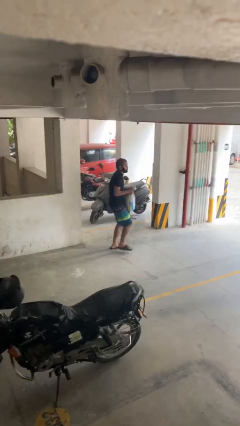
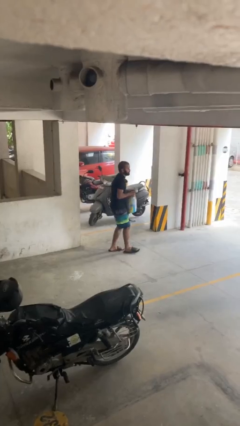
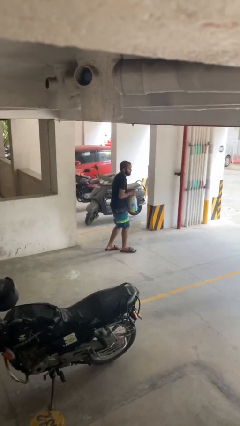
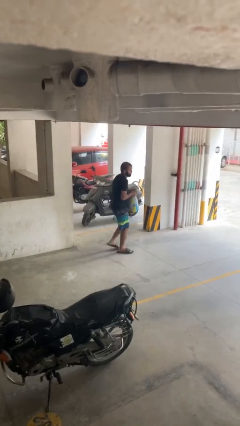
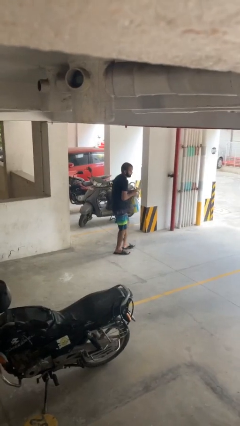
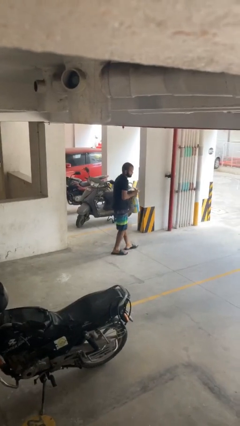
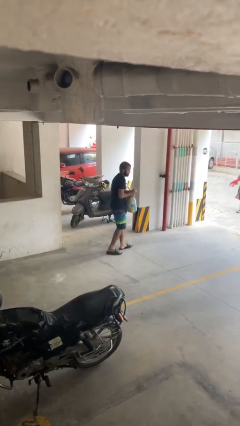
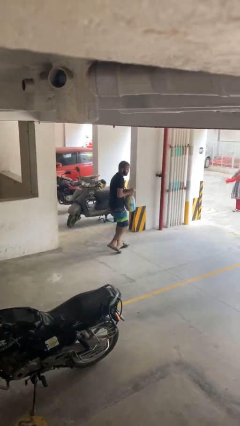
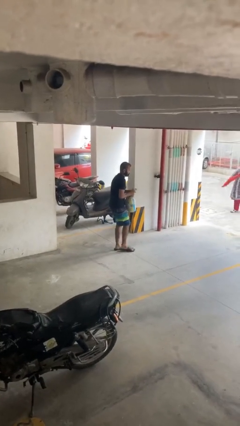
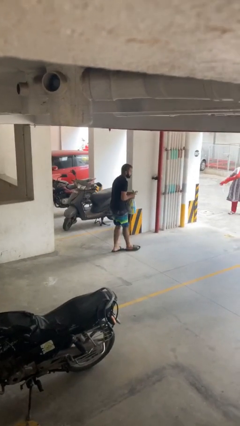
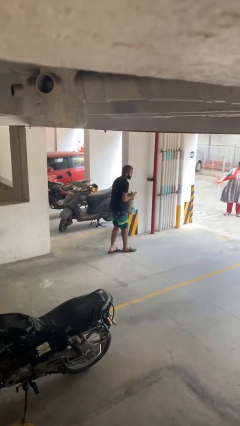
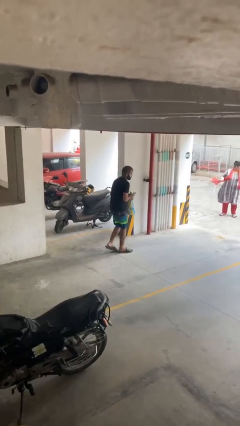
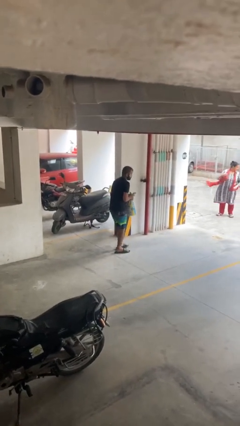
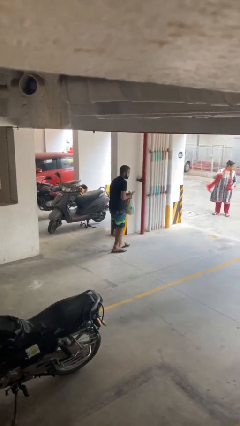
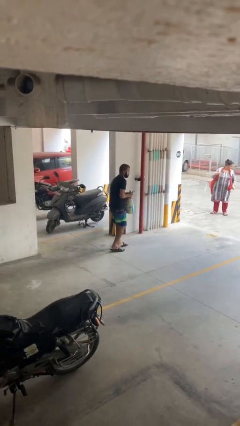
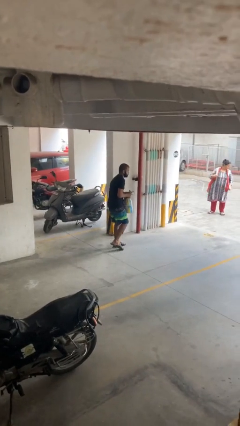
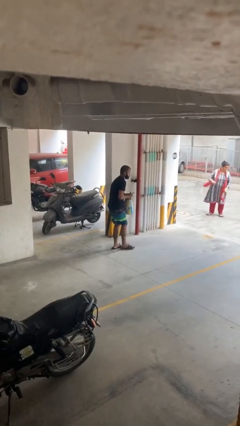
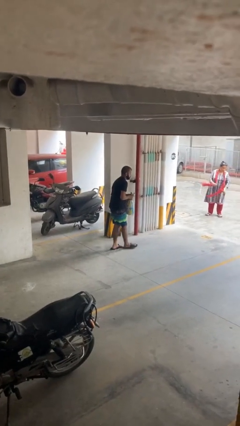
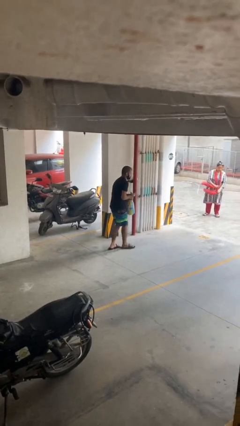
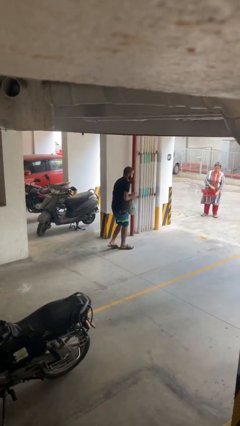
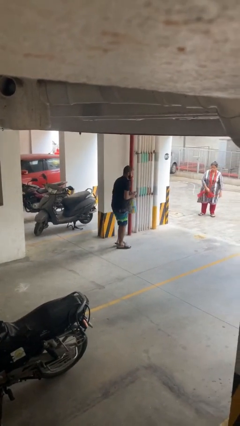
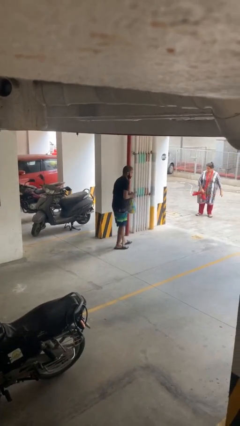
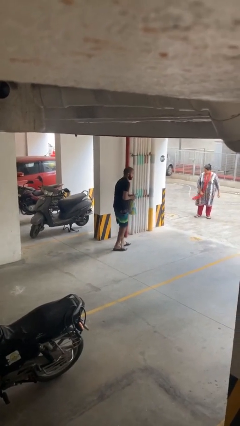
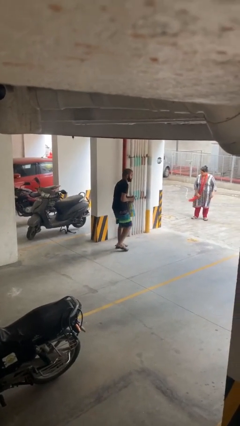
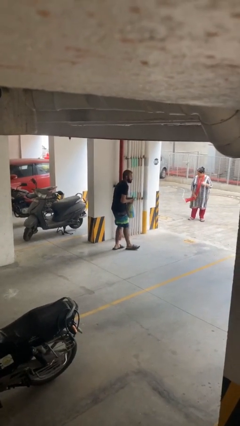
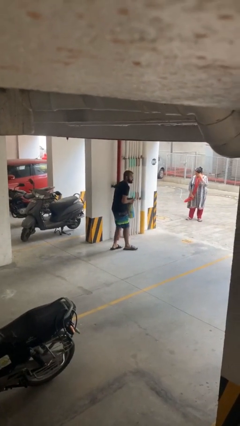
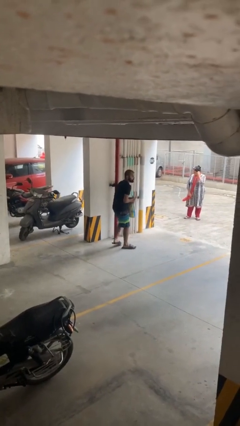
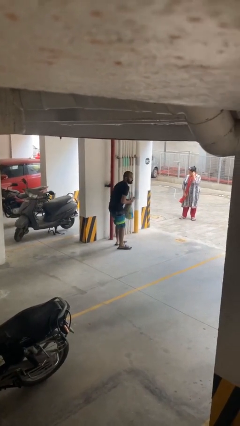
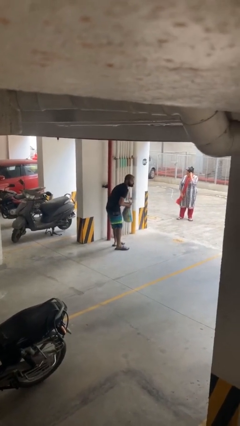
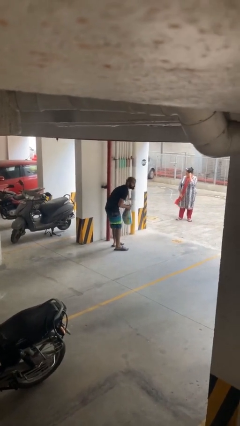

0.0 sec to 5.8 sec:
person carries heavy object

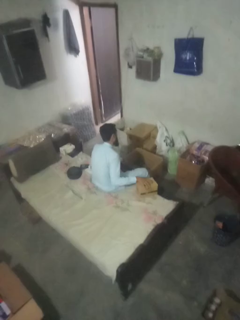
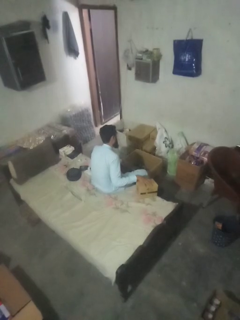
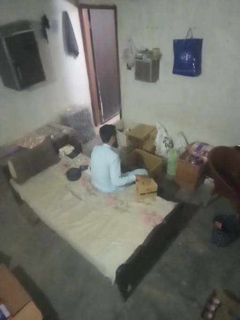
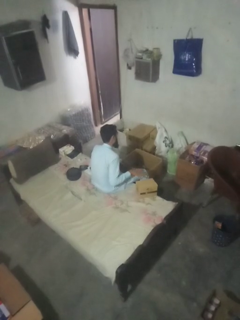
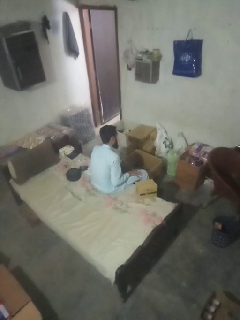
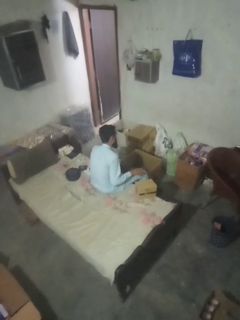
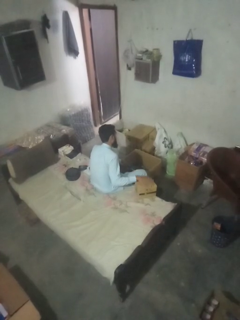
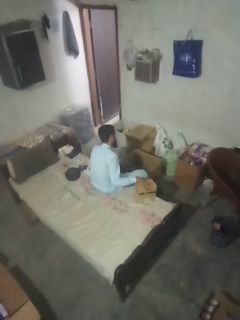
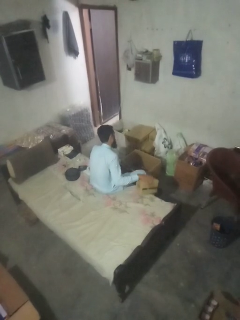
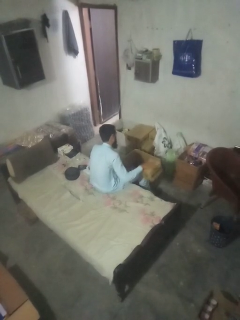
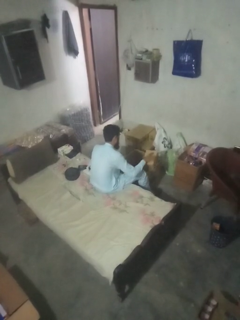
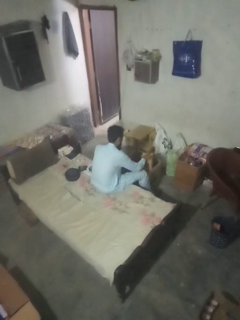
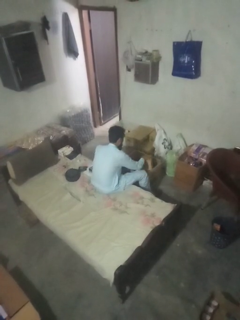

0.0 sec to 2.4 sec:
person puts object into box

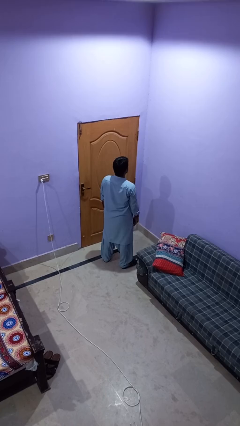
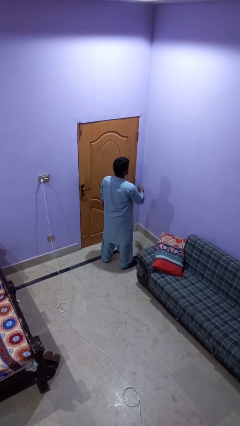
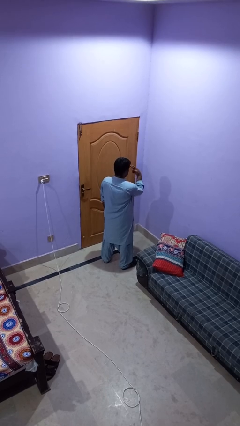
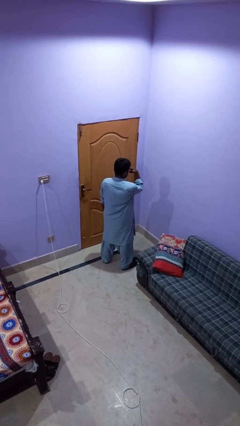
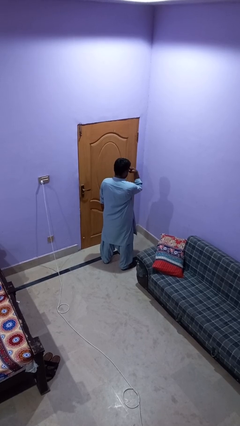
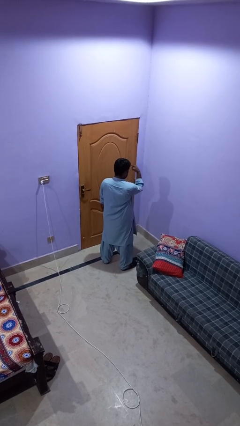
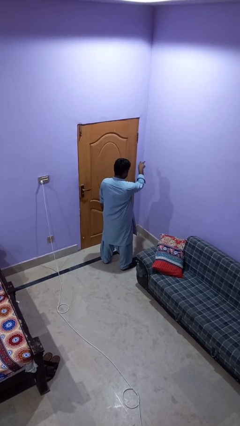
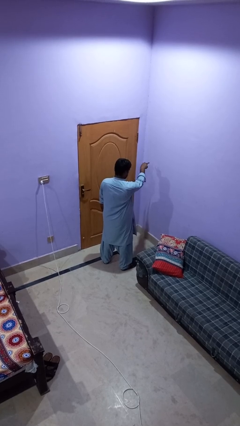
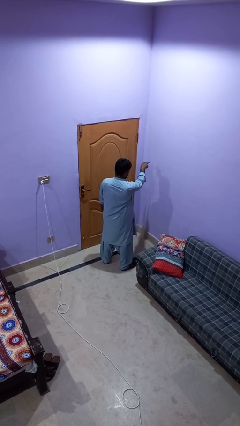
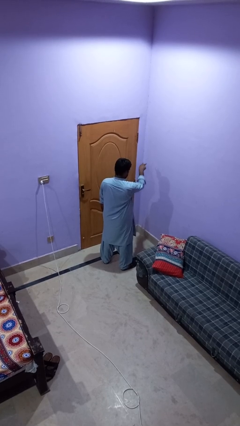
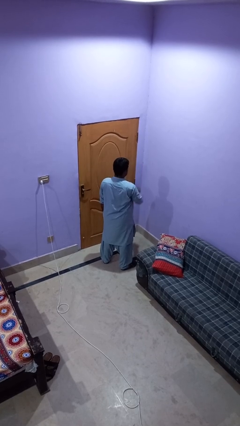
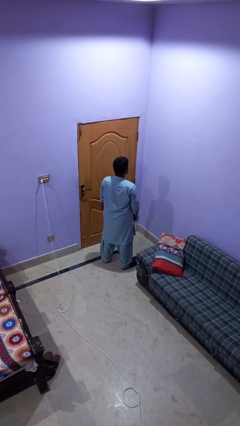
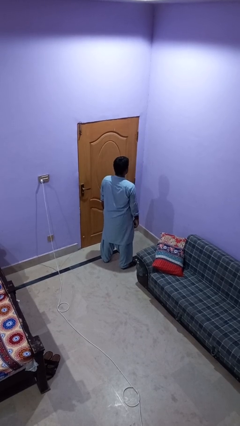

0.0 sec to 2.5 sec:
person gestures watch closely

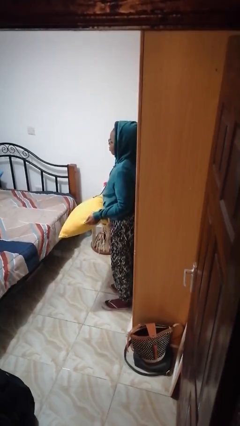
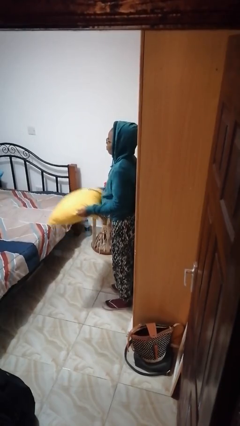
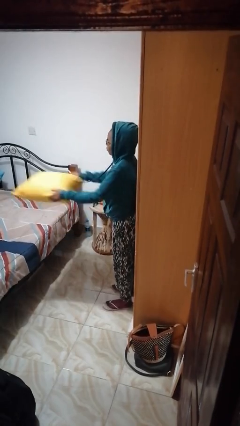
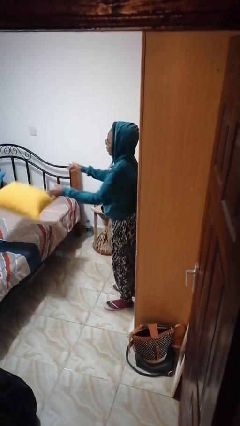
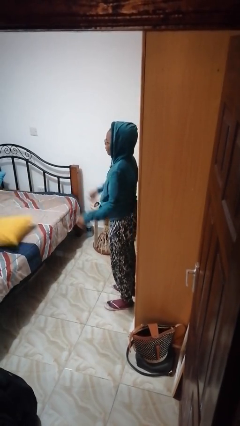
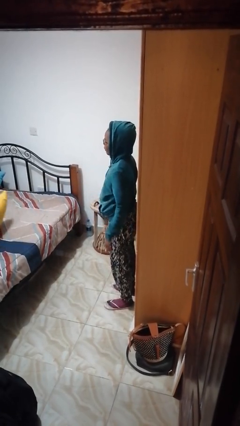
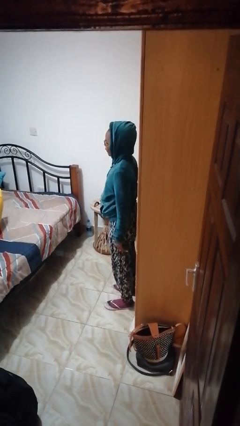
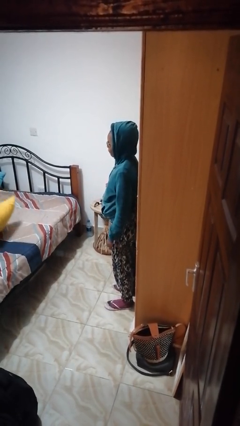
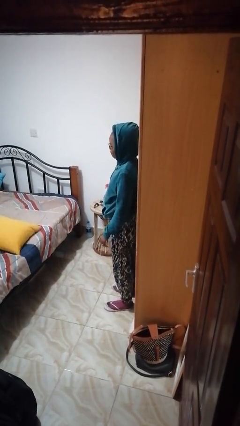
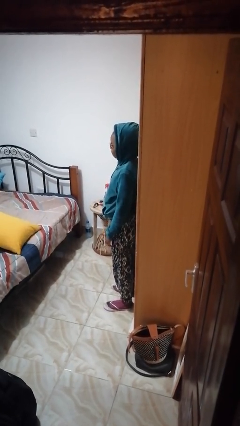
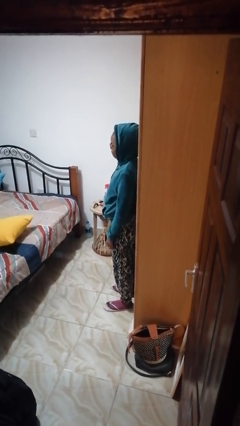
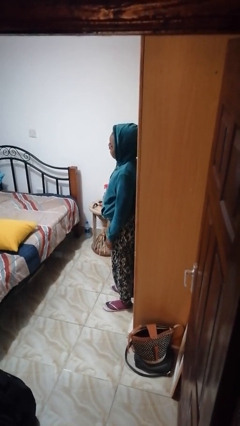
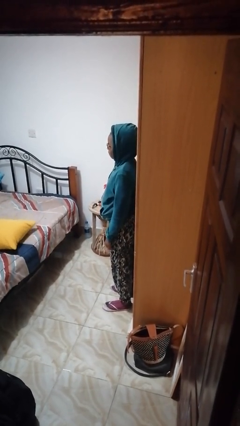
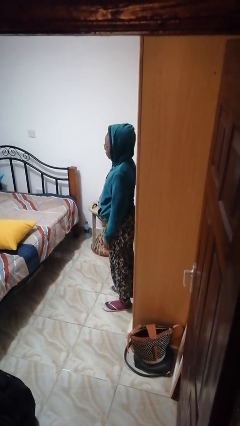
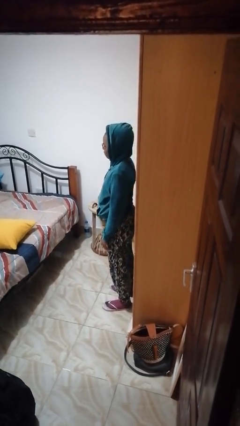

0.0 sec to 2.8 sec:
person throws object on bed

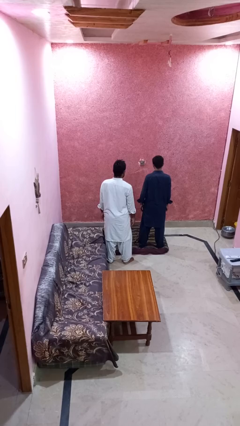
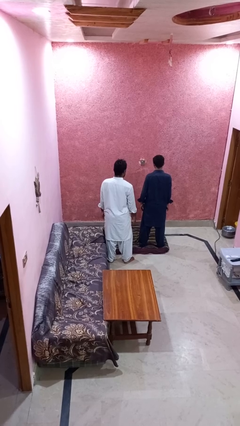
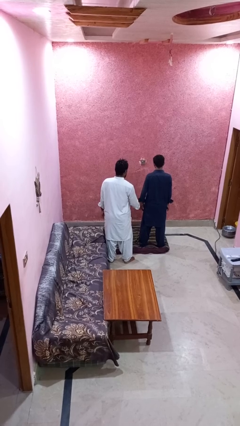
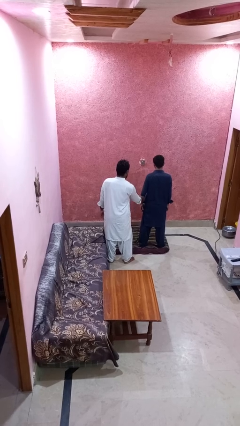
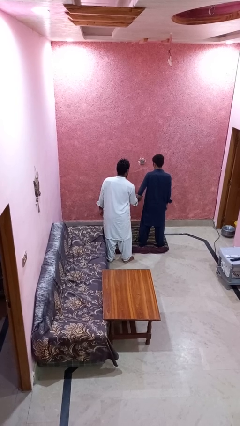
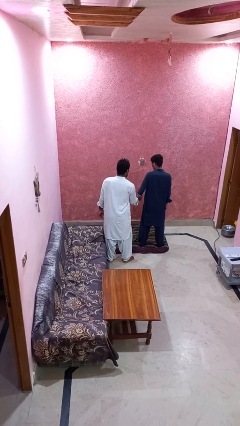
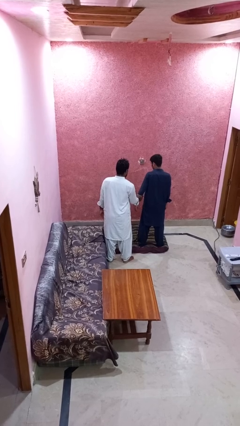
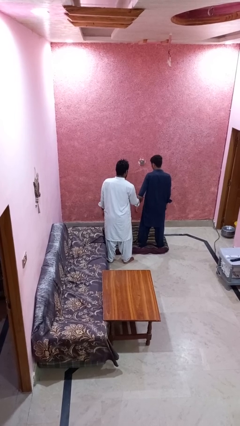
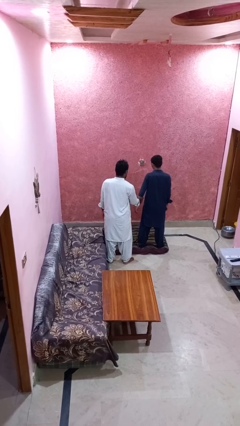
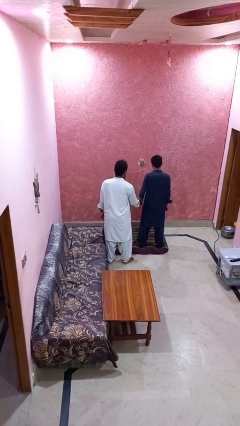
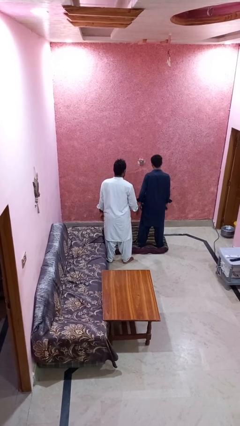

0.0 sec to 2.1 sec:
person grabs person by bicep

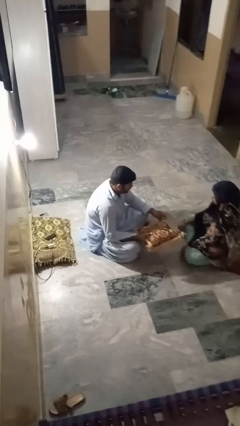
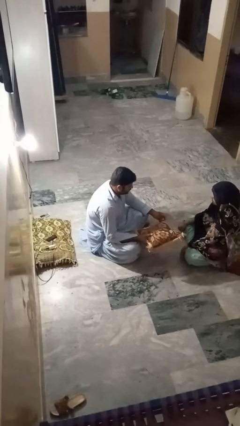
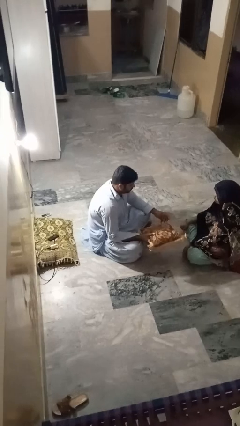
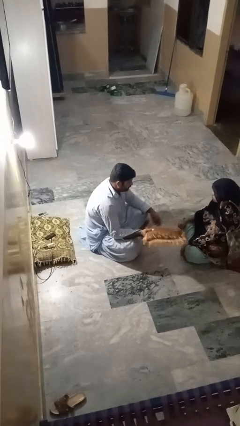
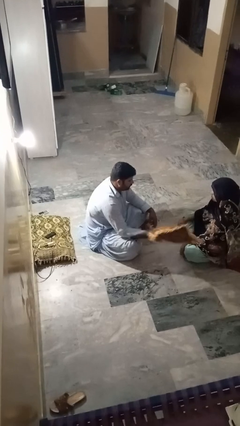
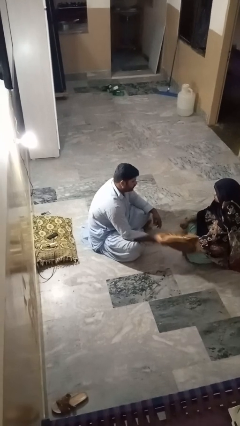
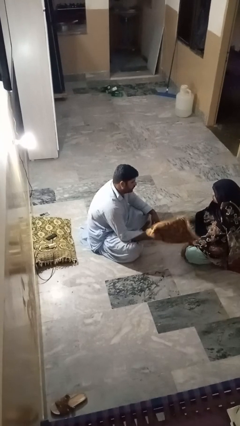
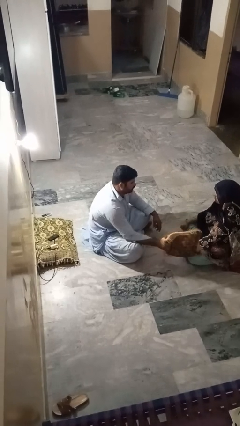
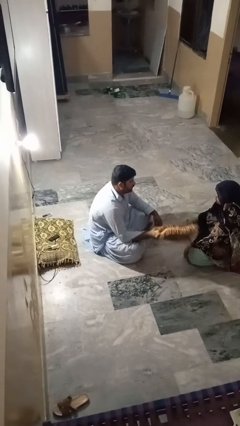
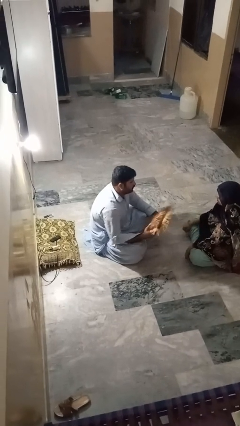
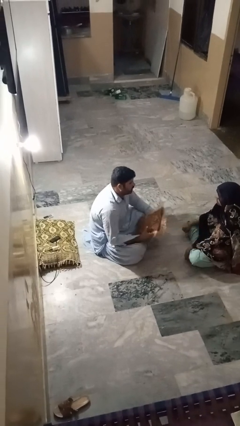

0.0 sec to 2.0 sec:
person hits person with pillow

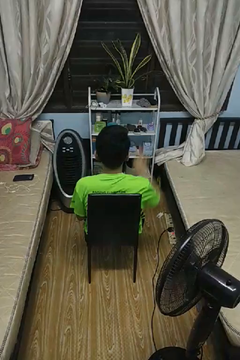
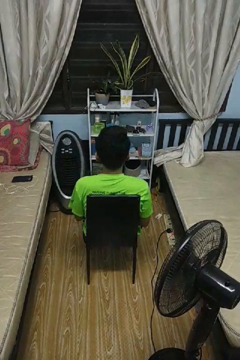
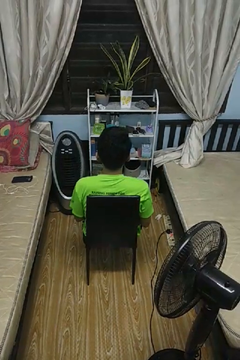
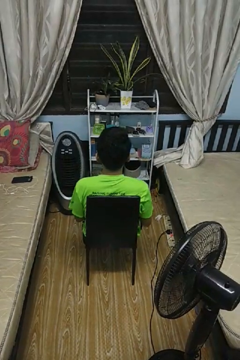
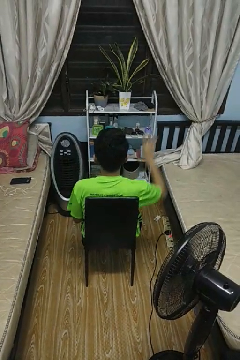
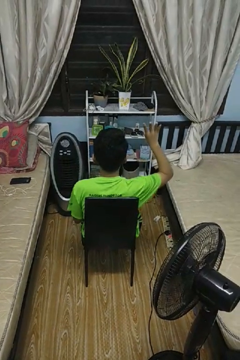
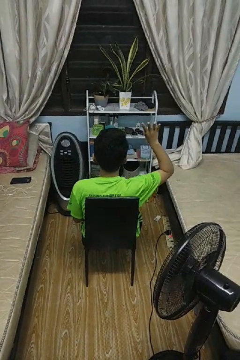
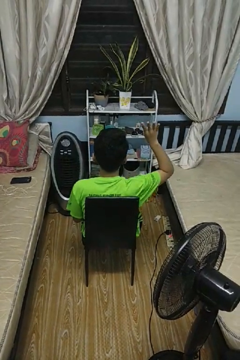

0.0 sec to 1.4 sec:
person gestures number four
